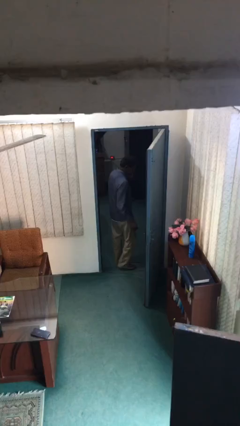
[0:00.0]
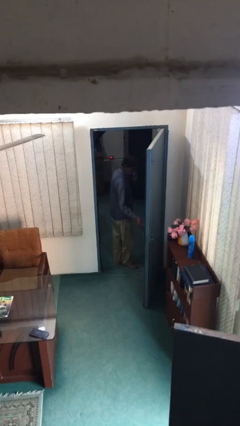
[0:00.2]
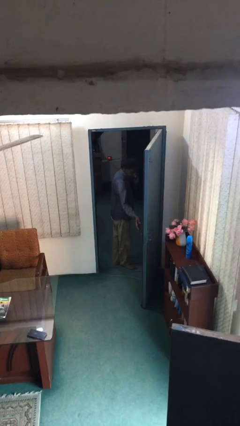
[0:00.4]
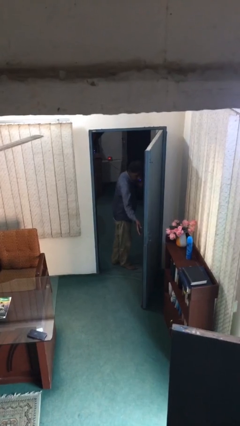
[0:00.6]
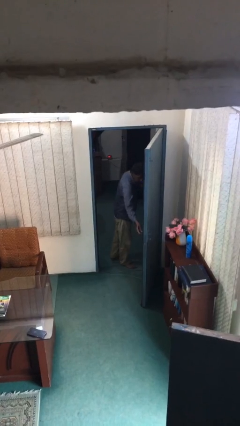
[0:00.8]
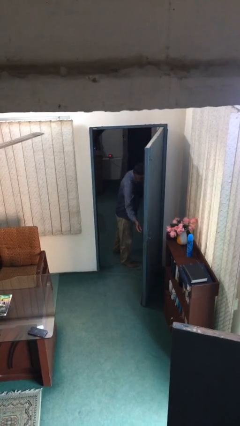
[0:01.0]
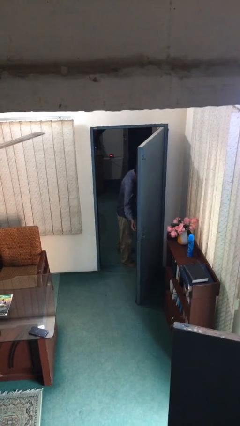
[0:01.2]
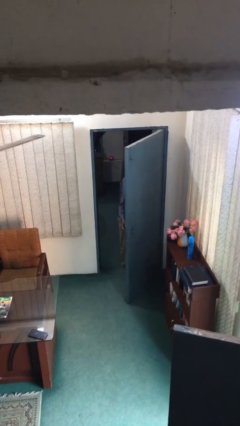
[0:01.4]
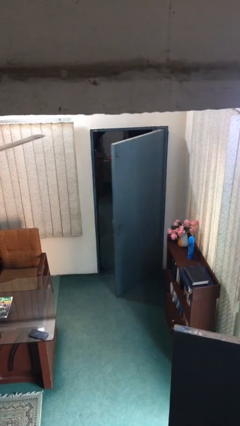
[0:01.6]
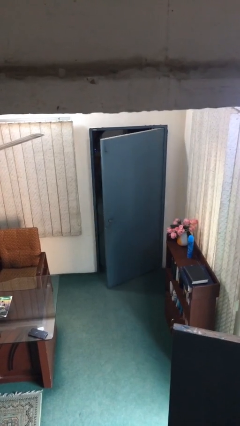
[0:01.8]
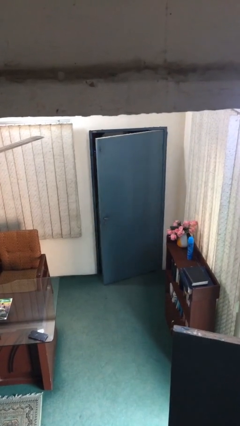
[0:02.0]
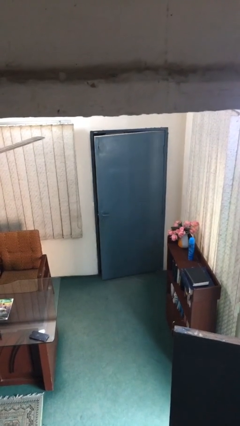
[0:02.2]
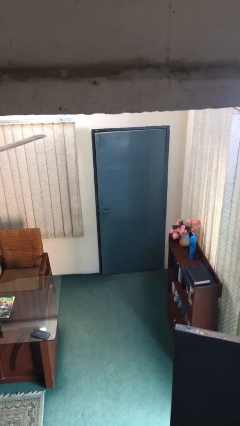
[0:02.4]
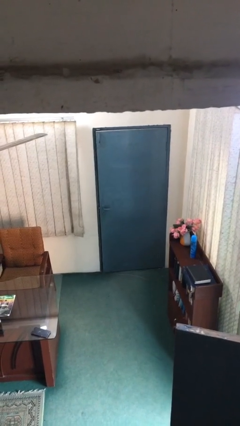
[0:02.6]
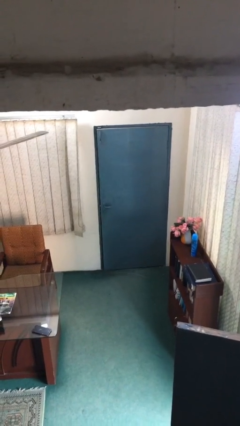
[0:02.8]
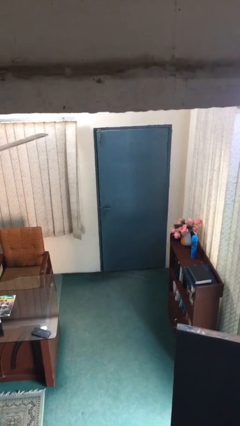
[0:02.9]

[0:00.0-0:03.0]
person closes facility door

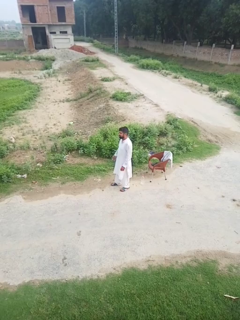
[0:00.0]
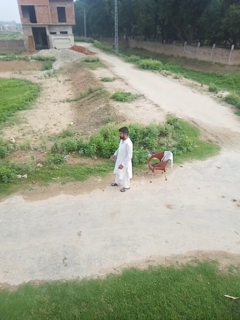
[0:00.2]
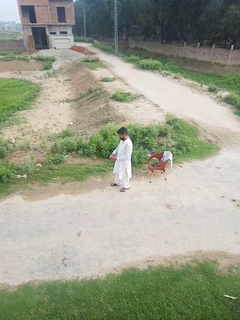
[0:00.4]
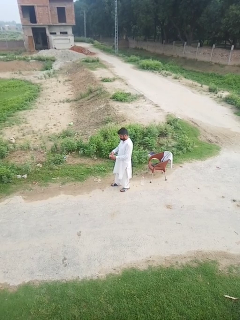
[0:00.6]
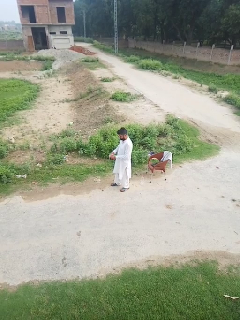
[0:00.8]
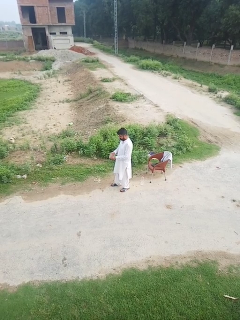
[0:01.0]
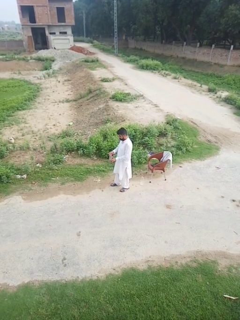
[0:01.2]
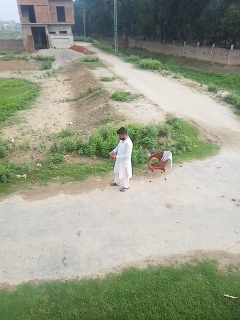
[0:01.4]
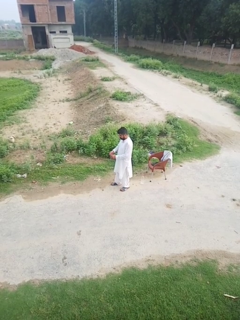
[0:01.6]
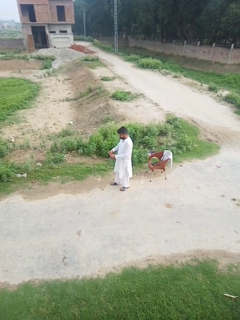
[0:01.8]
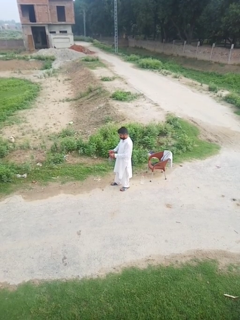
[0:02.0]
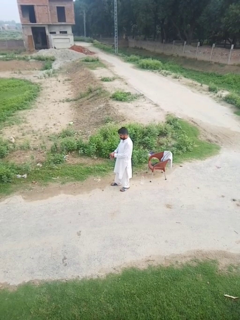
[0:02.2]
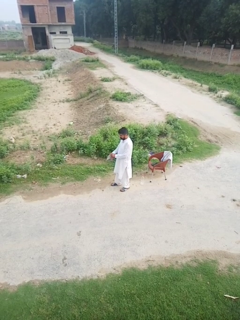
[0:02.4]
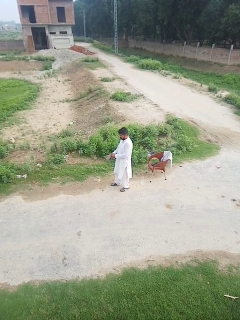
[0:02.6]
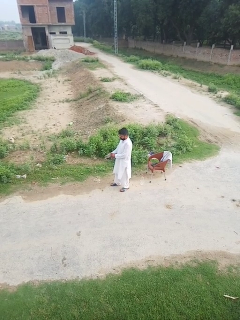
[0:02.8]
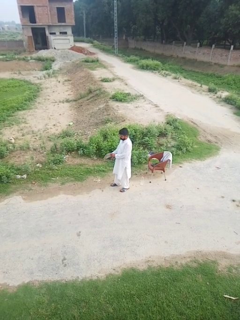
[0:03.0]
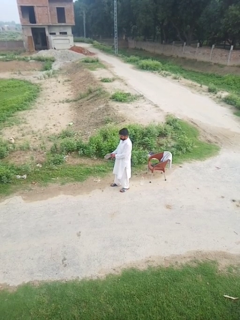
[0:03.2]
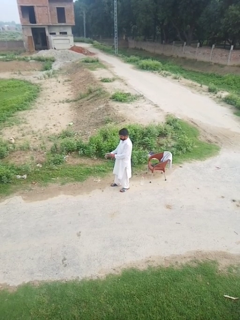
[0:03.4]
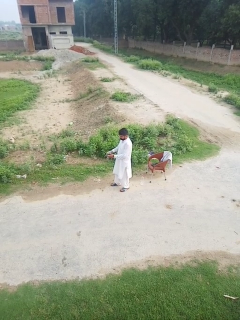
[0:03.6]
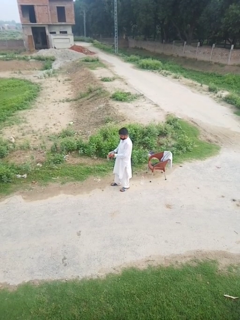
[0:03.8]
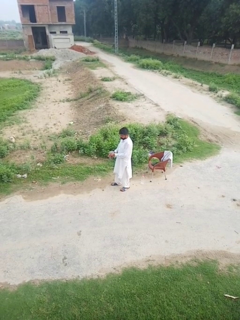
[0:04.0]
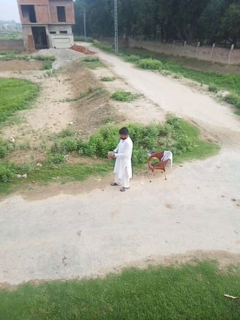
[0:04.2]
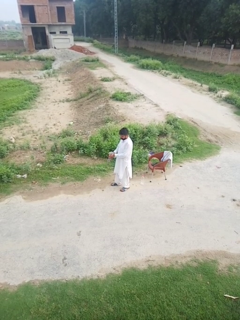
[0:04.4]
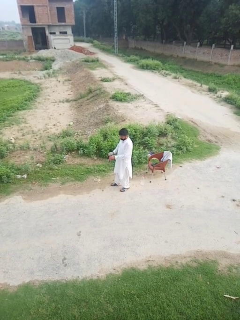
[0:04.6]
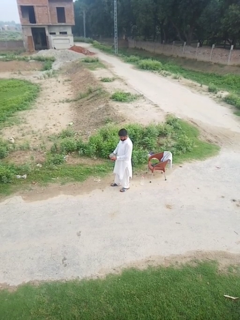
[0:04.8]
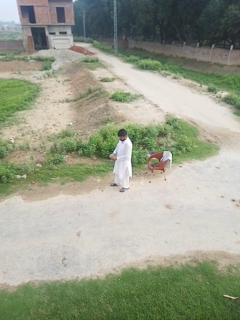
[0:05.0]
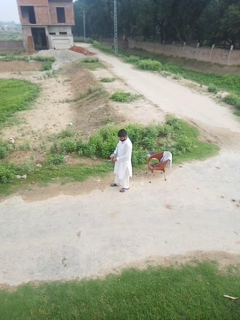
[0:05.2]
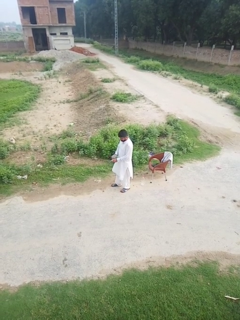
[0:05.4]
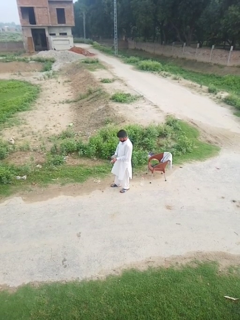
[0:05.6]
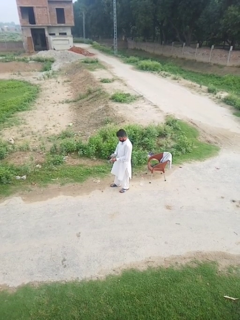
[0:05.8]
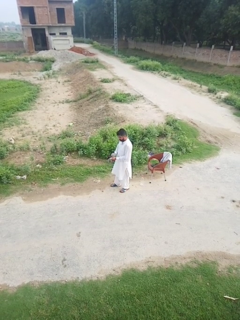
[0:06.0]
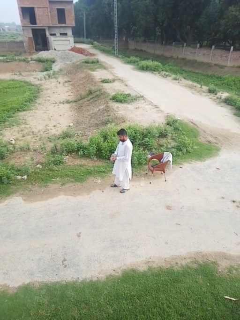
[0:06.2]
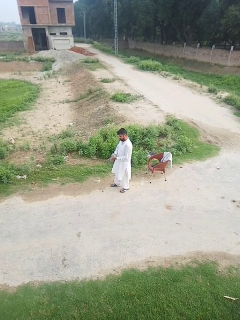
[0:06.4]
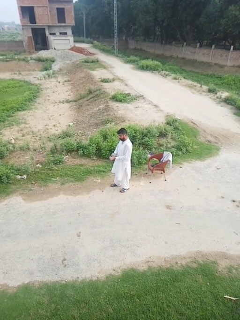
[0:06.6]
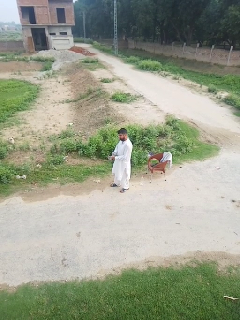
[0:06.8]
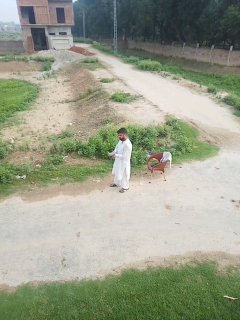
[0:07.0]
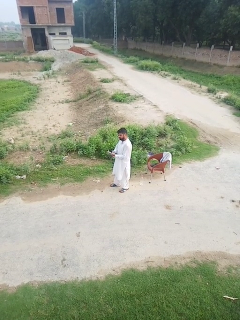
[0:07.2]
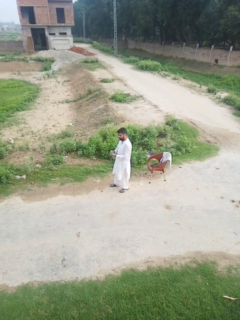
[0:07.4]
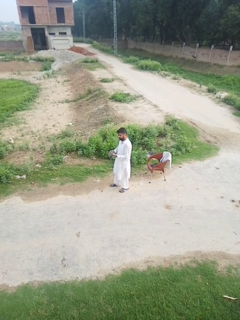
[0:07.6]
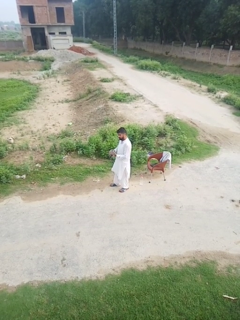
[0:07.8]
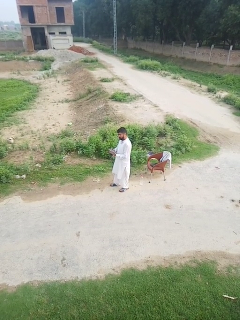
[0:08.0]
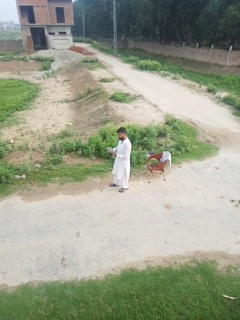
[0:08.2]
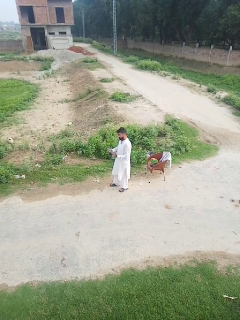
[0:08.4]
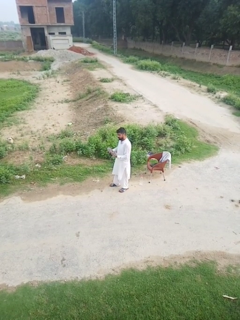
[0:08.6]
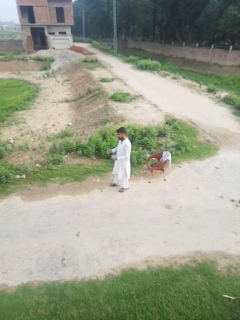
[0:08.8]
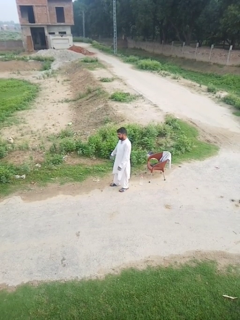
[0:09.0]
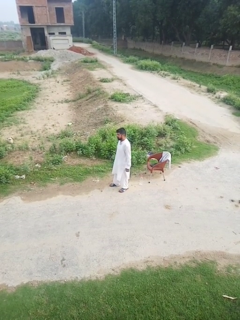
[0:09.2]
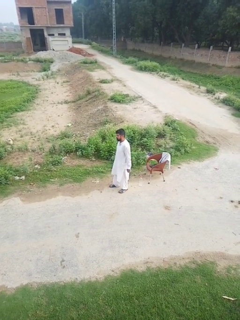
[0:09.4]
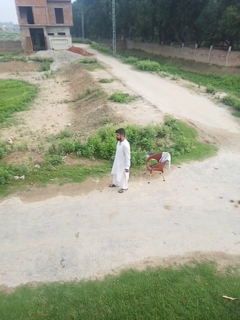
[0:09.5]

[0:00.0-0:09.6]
person puts on gloves

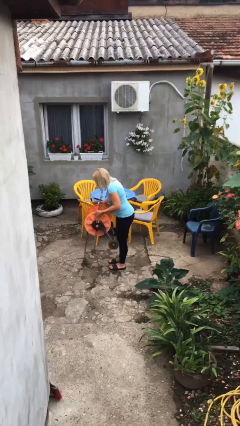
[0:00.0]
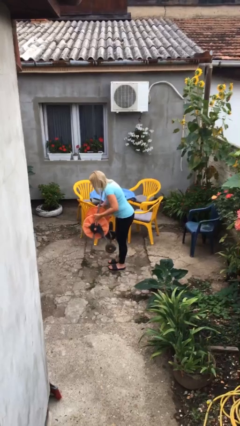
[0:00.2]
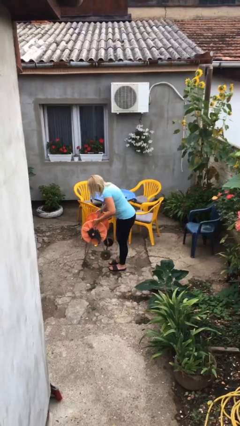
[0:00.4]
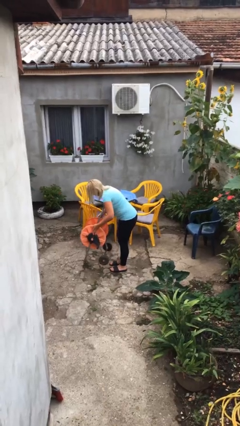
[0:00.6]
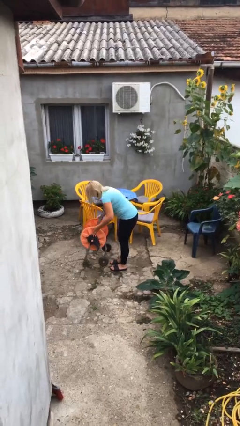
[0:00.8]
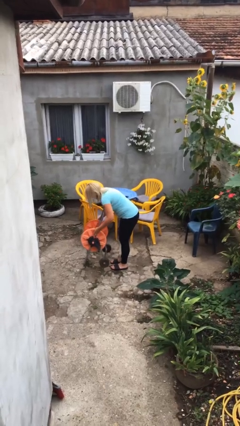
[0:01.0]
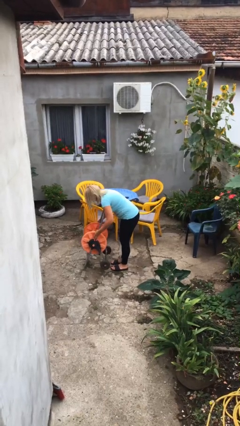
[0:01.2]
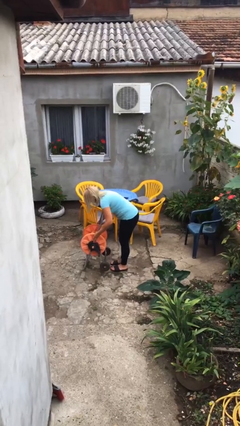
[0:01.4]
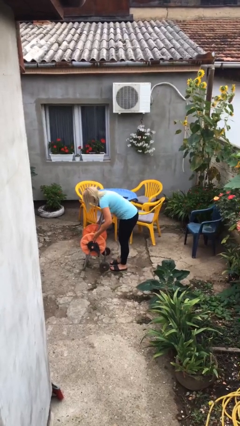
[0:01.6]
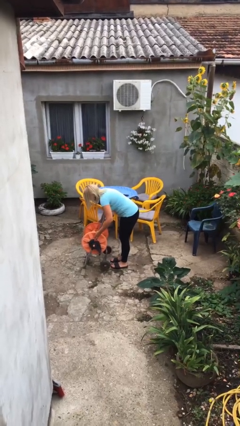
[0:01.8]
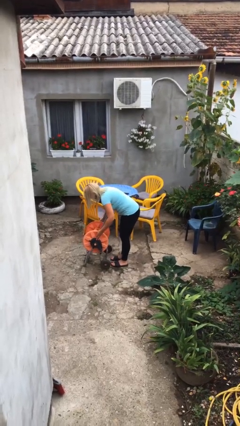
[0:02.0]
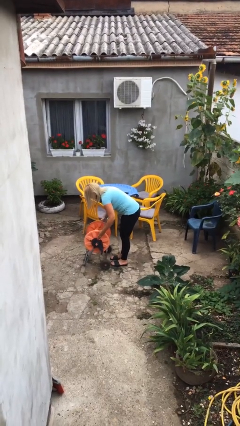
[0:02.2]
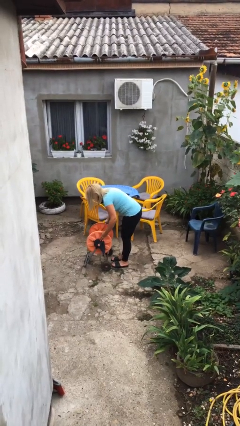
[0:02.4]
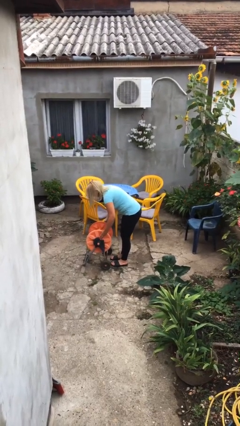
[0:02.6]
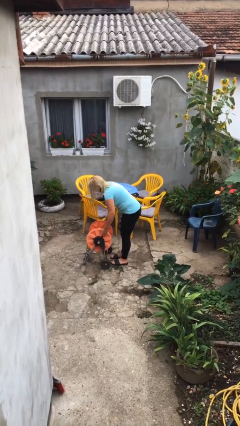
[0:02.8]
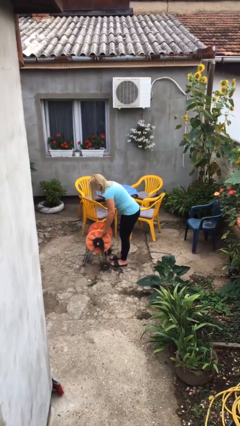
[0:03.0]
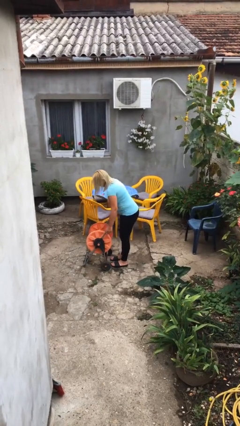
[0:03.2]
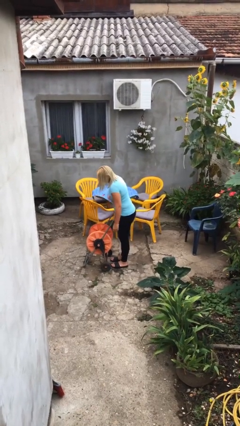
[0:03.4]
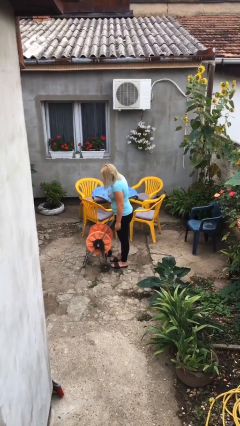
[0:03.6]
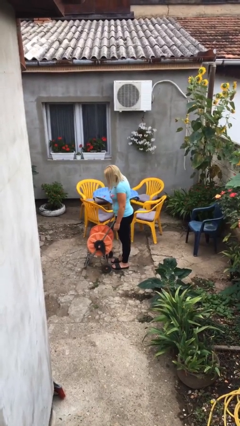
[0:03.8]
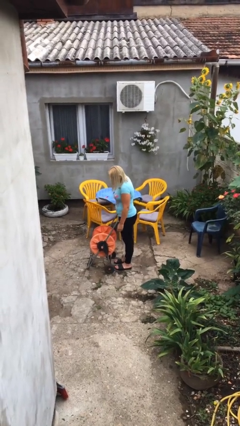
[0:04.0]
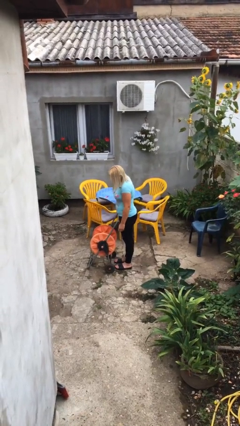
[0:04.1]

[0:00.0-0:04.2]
person puts down object on floor

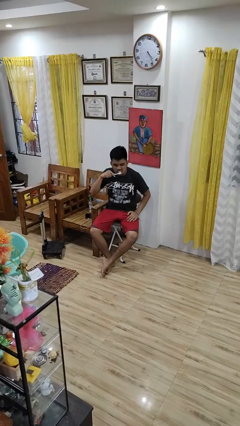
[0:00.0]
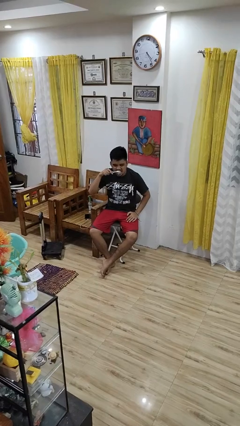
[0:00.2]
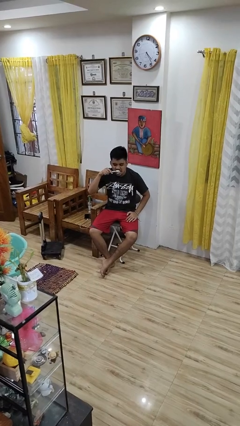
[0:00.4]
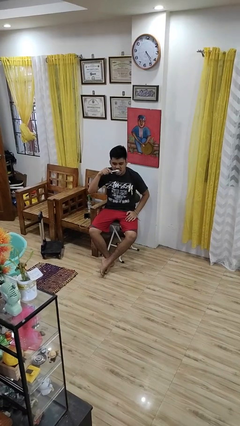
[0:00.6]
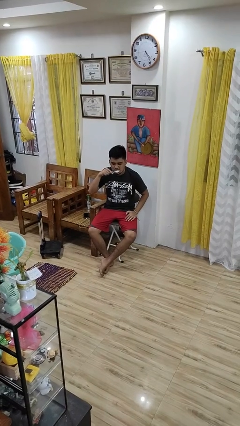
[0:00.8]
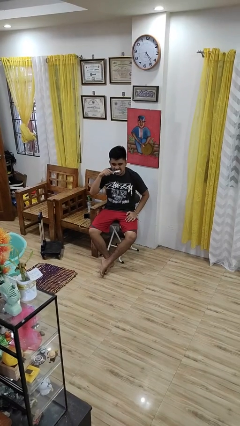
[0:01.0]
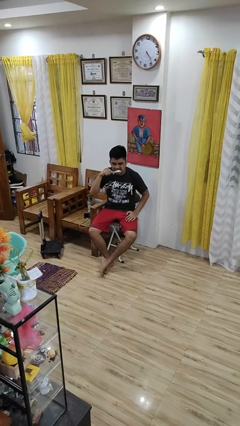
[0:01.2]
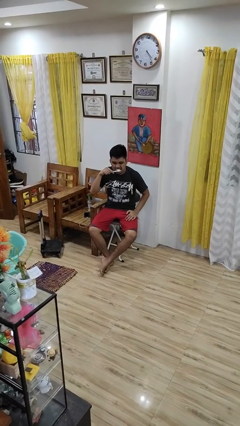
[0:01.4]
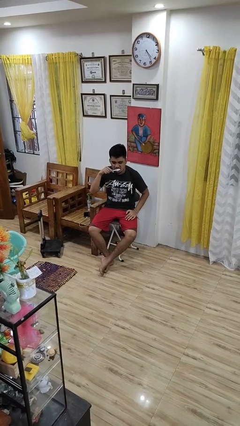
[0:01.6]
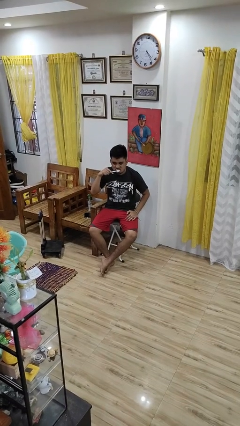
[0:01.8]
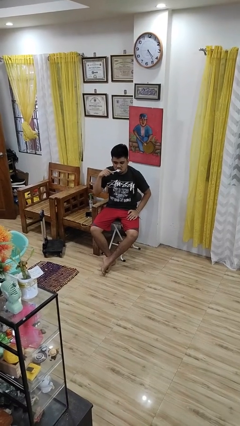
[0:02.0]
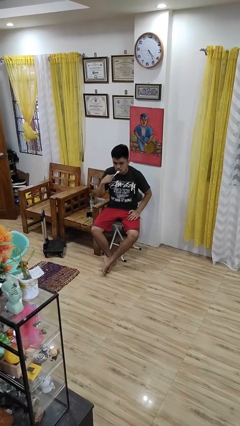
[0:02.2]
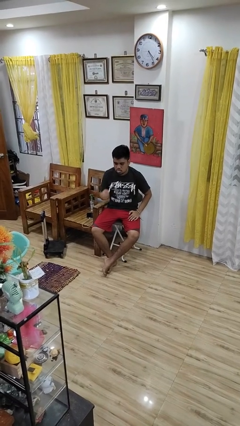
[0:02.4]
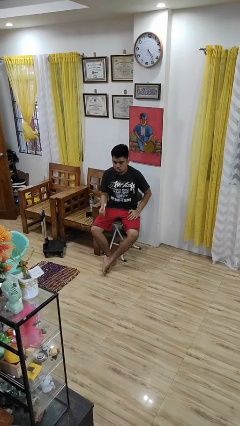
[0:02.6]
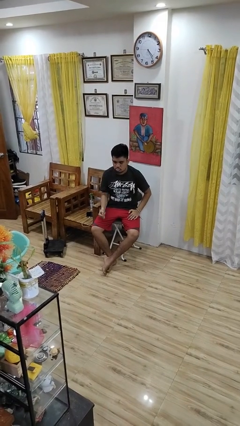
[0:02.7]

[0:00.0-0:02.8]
person brushes teeth

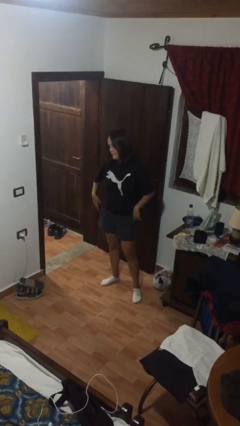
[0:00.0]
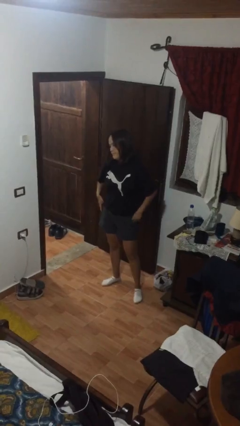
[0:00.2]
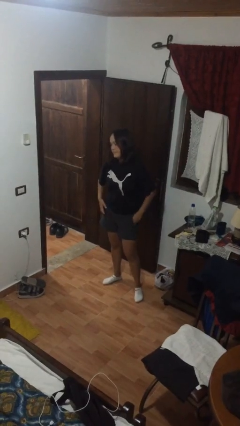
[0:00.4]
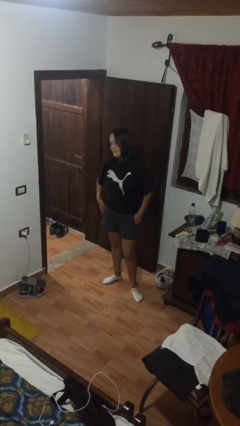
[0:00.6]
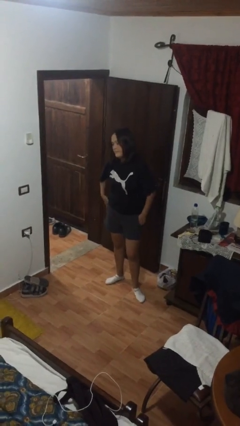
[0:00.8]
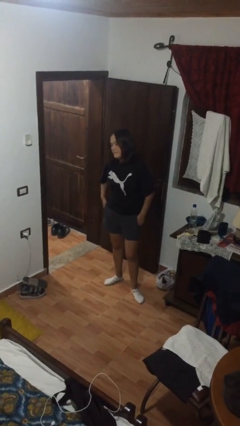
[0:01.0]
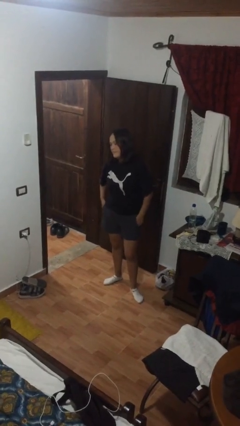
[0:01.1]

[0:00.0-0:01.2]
person puts phone into pocket
